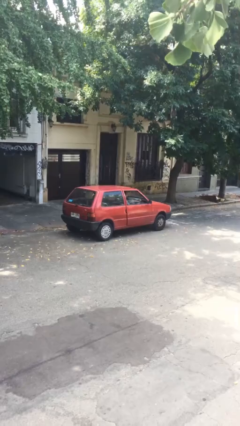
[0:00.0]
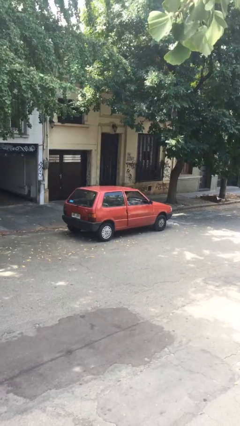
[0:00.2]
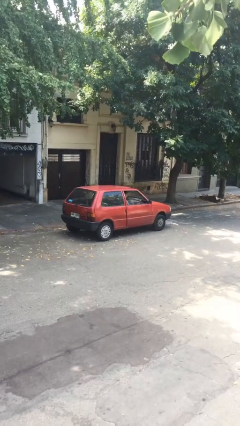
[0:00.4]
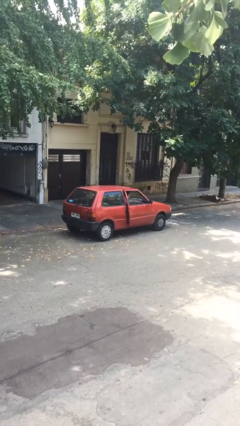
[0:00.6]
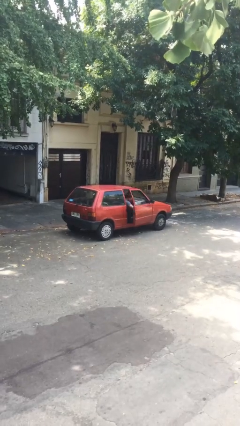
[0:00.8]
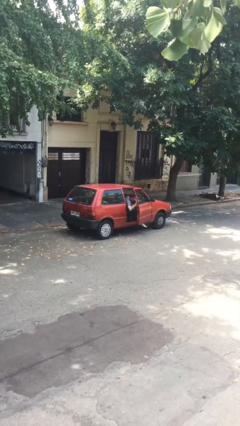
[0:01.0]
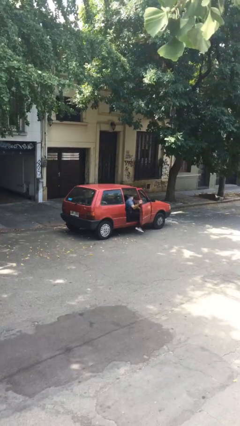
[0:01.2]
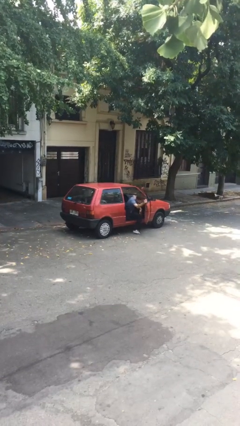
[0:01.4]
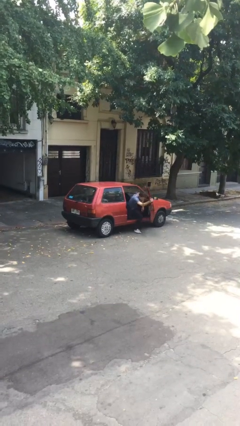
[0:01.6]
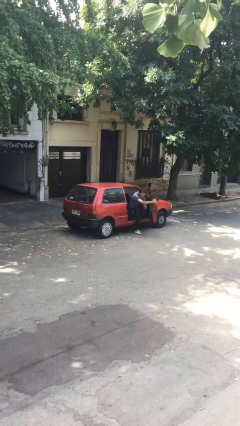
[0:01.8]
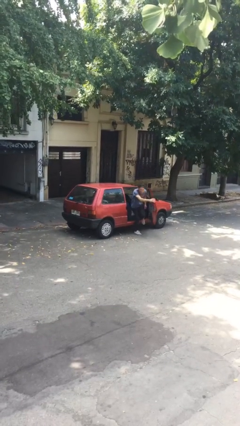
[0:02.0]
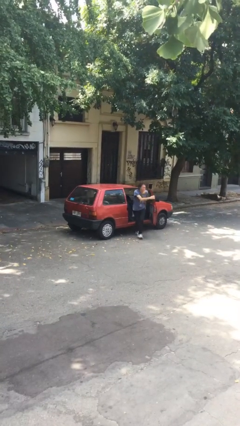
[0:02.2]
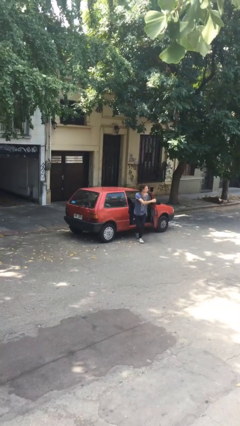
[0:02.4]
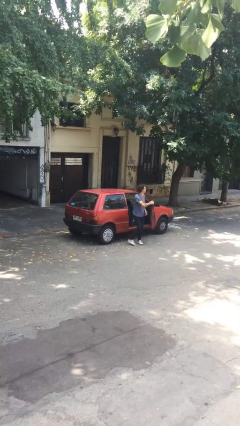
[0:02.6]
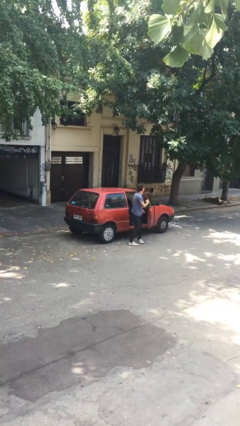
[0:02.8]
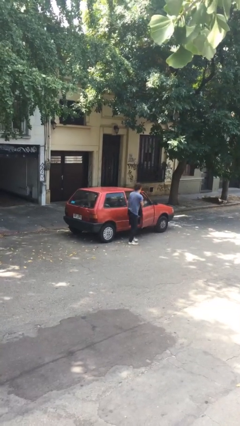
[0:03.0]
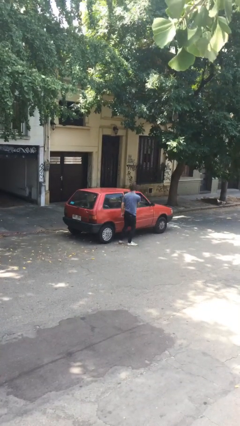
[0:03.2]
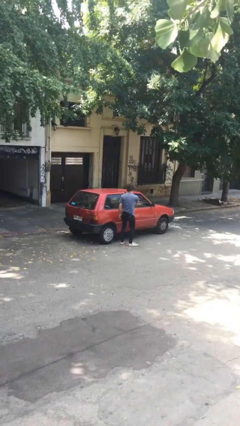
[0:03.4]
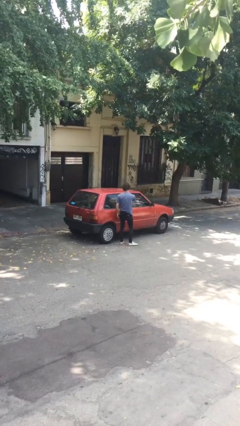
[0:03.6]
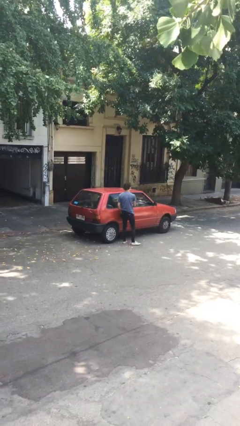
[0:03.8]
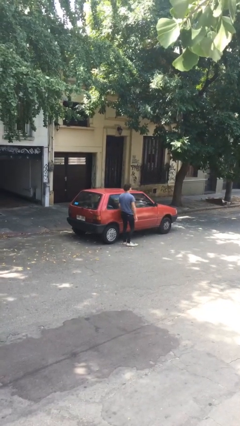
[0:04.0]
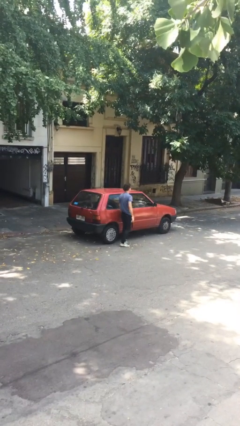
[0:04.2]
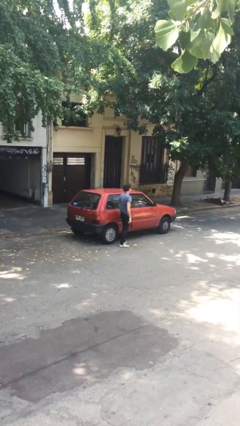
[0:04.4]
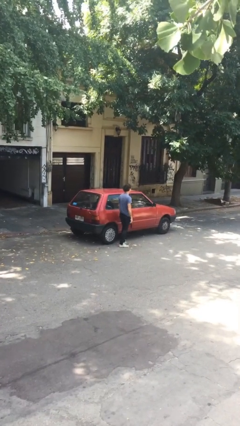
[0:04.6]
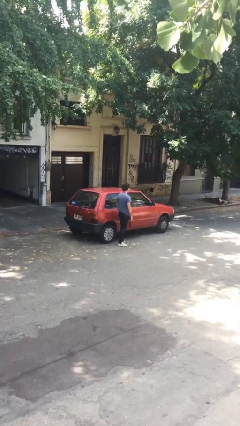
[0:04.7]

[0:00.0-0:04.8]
car drops off person

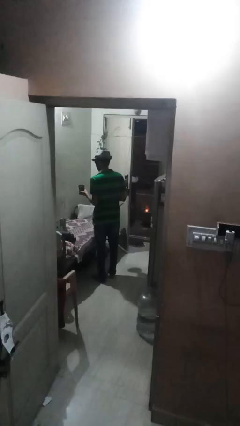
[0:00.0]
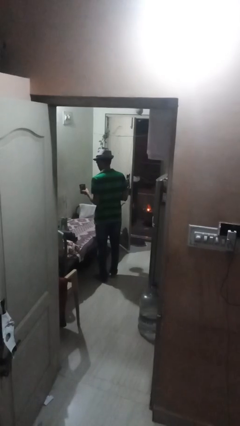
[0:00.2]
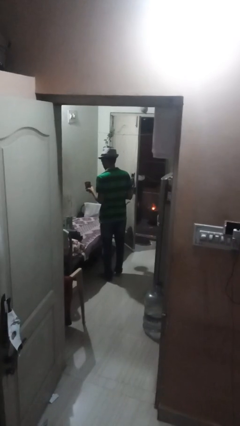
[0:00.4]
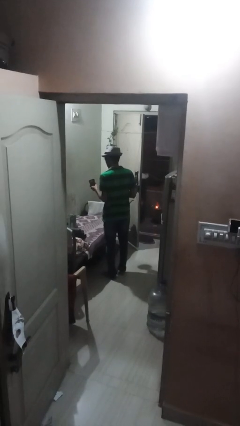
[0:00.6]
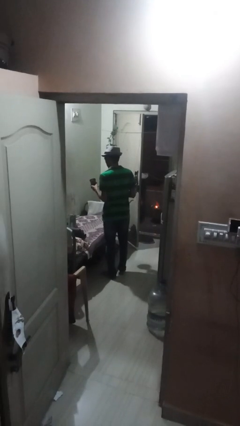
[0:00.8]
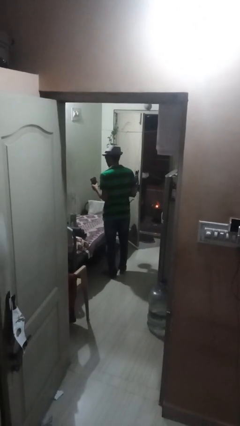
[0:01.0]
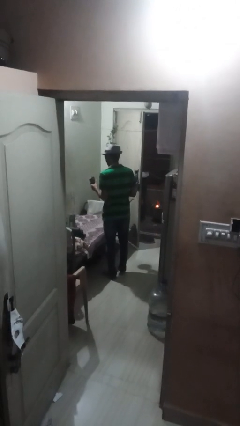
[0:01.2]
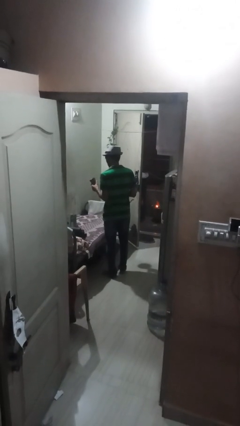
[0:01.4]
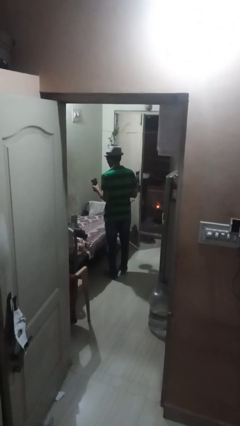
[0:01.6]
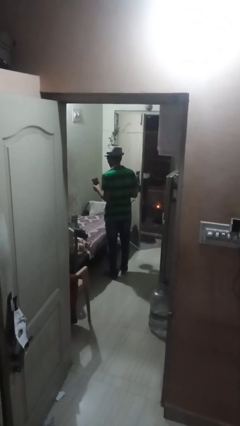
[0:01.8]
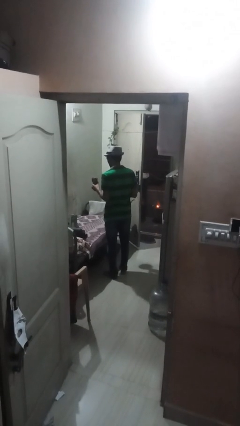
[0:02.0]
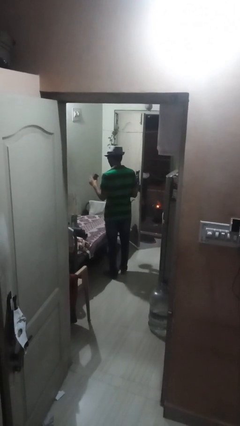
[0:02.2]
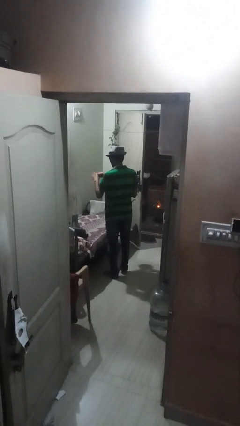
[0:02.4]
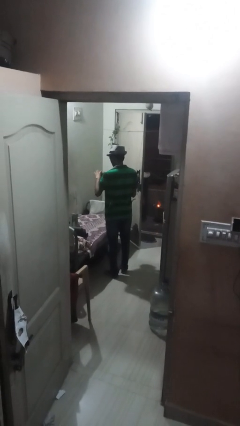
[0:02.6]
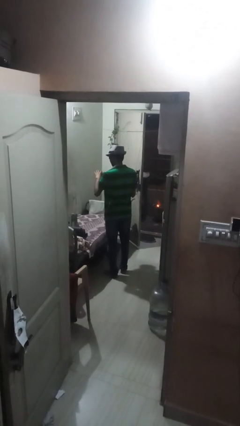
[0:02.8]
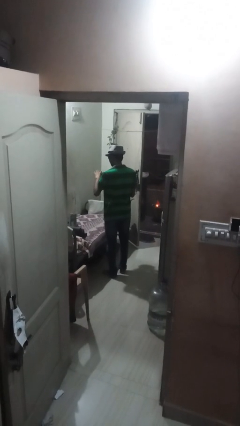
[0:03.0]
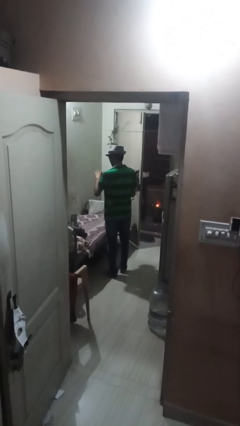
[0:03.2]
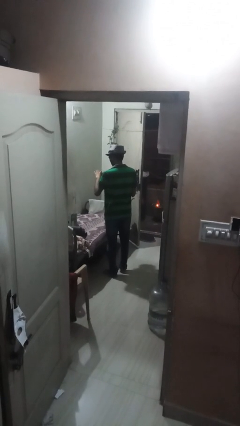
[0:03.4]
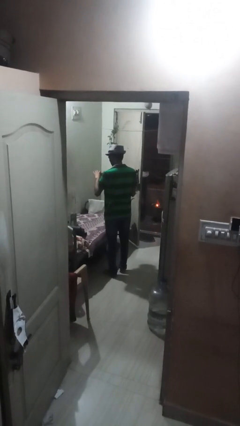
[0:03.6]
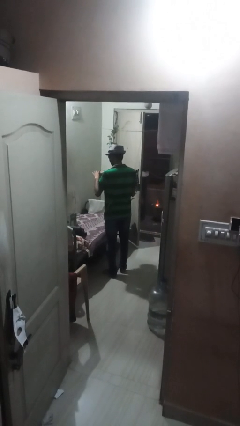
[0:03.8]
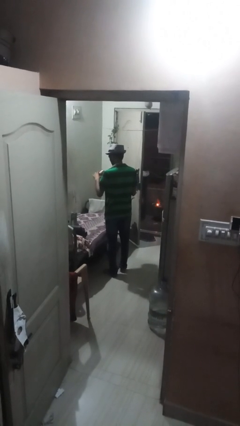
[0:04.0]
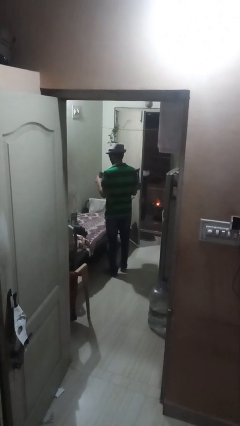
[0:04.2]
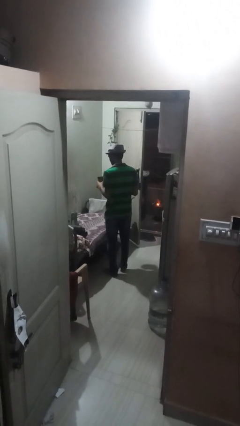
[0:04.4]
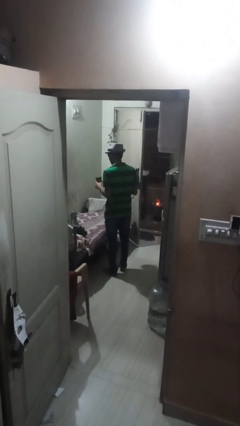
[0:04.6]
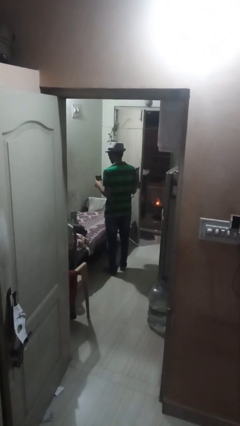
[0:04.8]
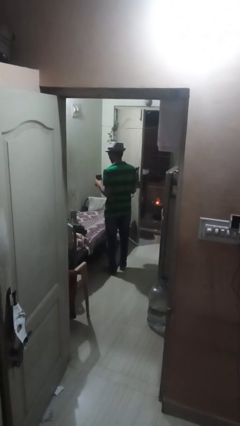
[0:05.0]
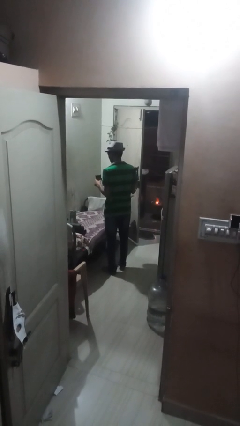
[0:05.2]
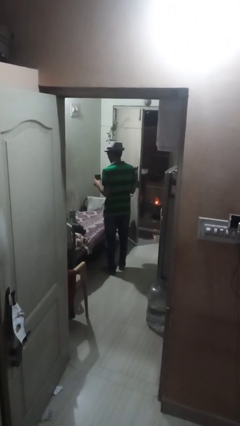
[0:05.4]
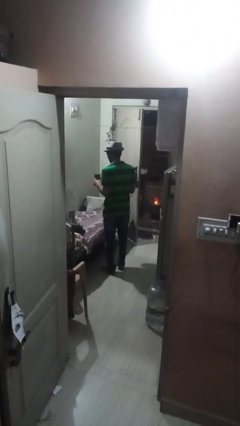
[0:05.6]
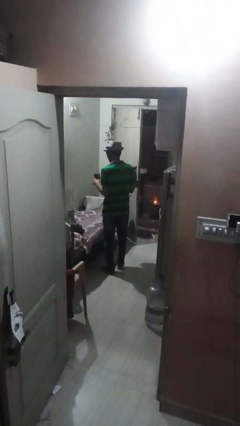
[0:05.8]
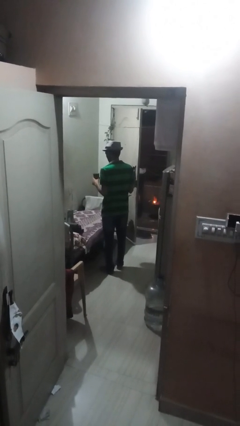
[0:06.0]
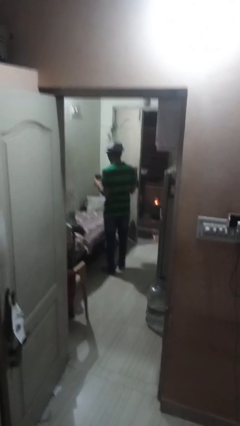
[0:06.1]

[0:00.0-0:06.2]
person pours coffee into mug

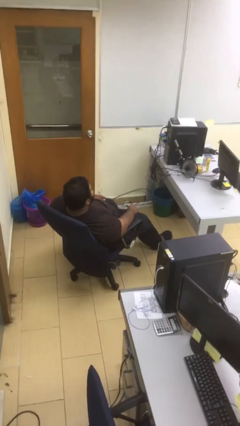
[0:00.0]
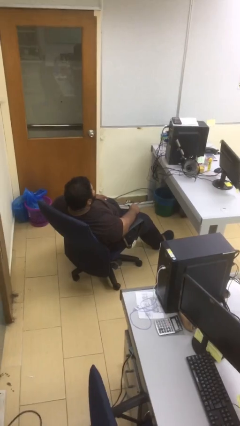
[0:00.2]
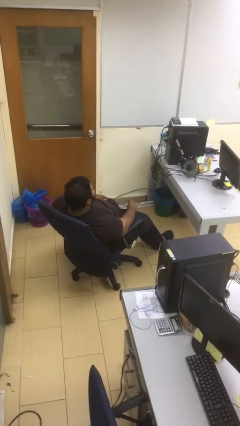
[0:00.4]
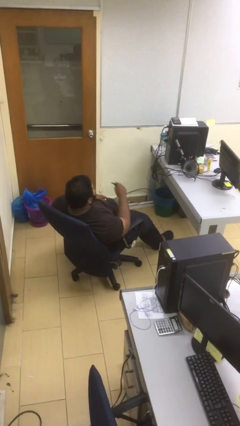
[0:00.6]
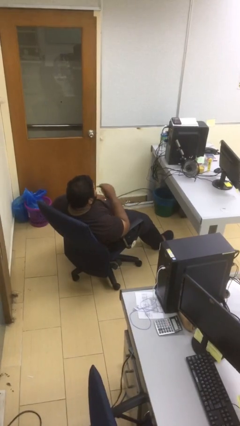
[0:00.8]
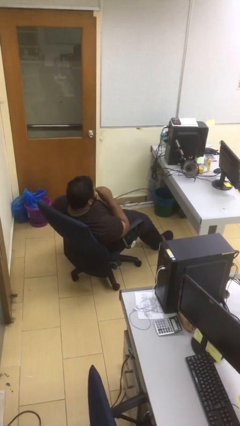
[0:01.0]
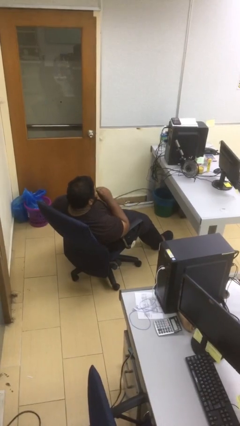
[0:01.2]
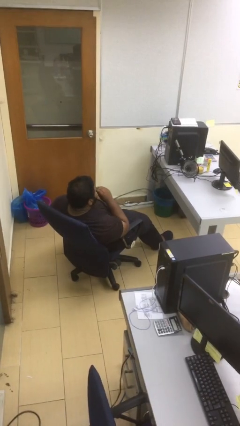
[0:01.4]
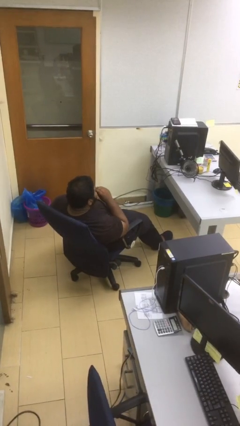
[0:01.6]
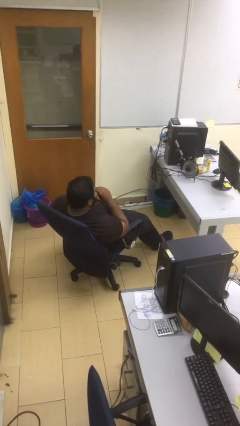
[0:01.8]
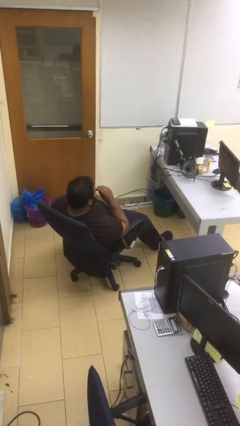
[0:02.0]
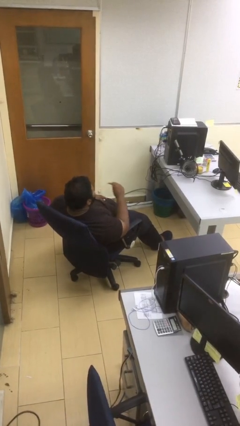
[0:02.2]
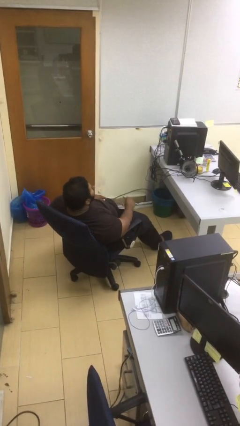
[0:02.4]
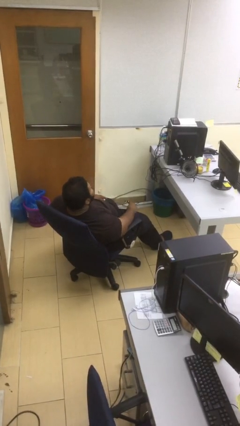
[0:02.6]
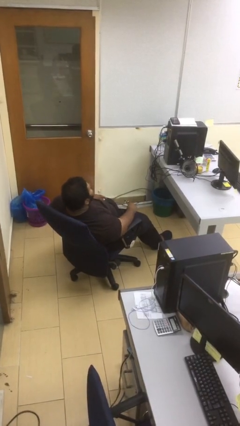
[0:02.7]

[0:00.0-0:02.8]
person vapes

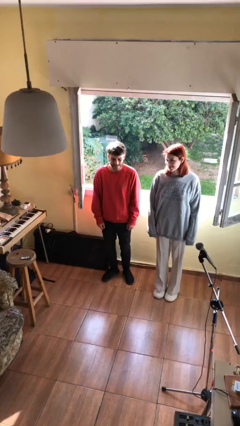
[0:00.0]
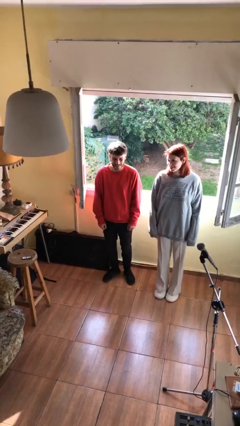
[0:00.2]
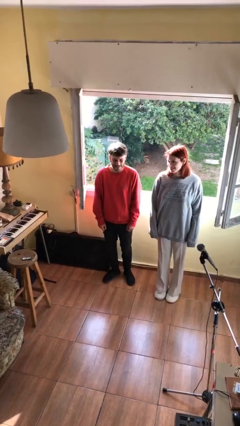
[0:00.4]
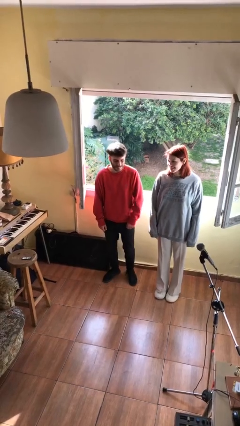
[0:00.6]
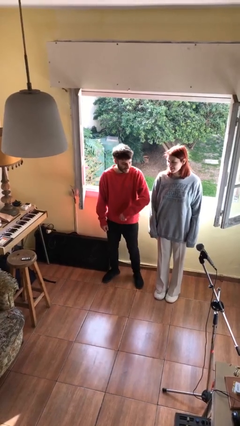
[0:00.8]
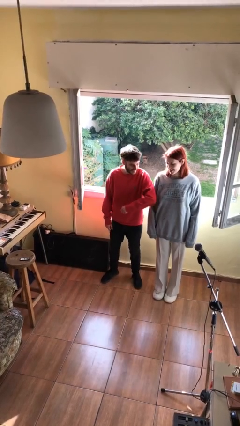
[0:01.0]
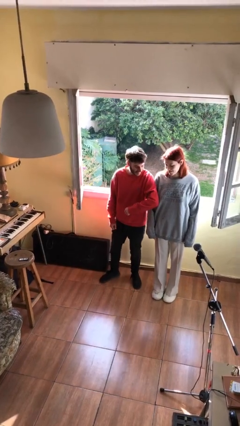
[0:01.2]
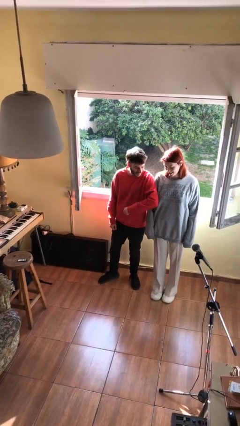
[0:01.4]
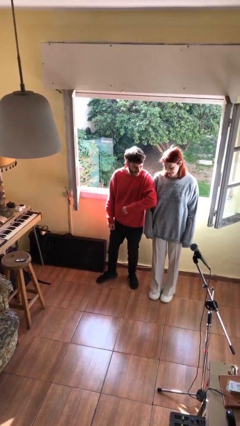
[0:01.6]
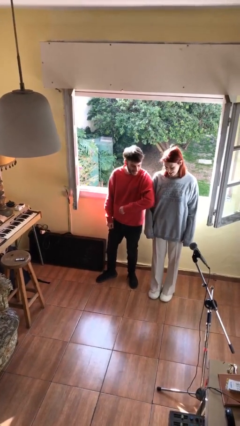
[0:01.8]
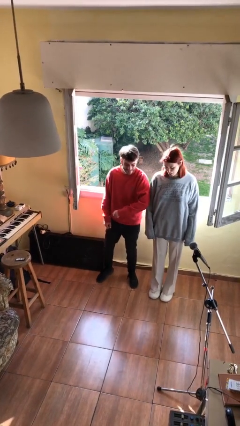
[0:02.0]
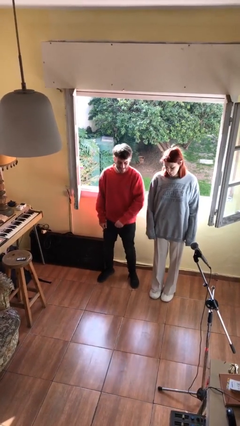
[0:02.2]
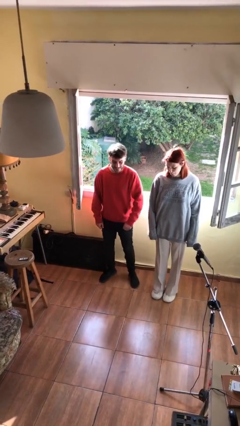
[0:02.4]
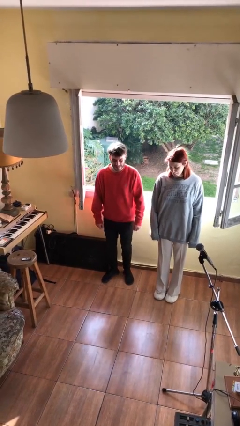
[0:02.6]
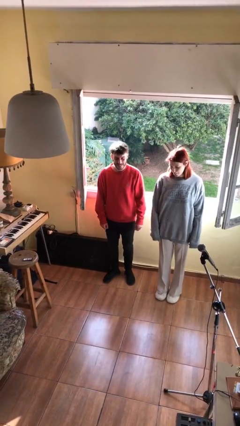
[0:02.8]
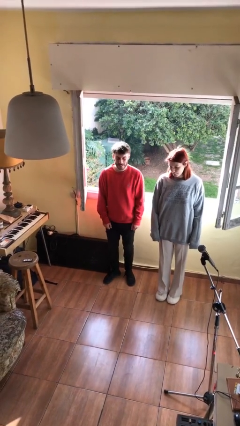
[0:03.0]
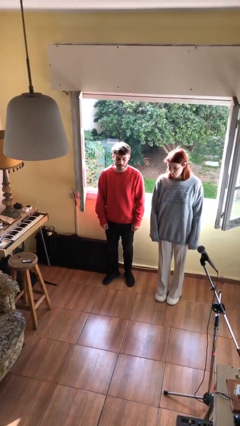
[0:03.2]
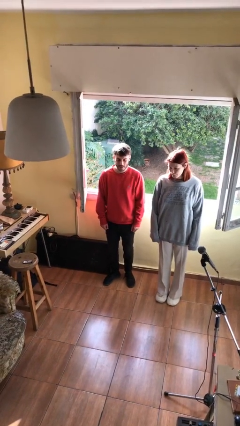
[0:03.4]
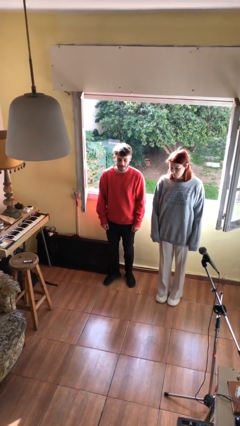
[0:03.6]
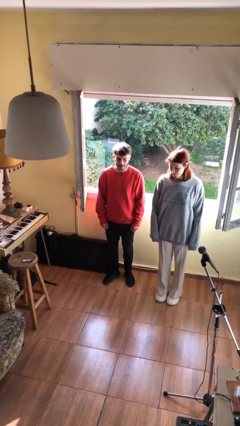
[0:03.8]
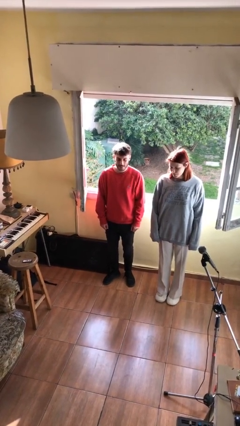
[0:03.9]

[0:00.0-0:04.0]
person nudges person with elbow
